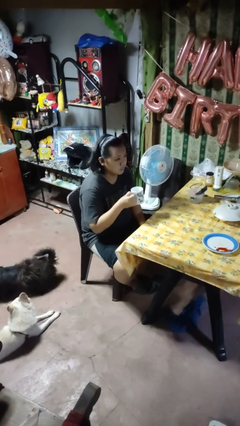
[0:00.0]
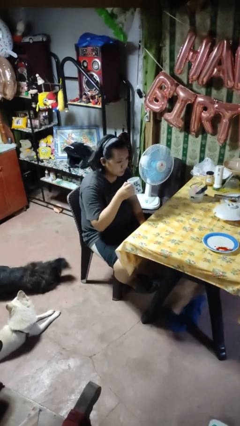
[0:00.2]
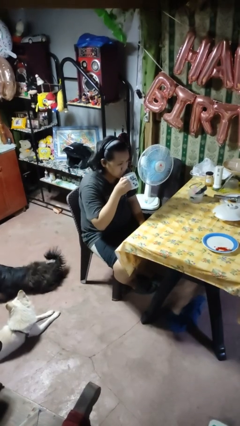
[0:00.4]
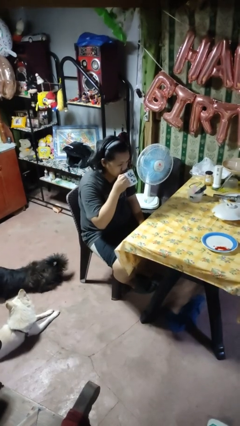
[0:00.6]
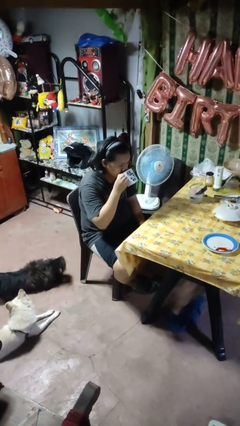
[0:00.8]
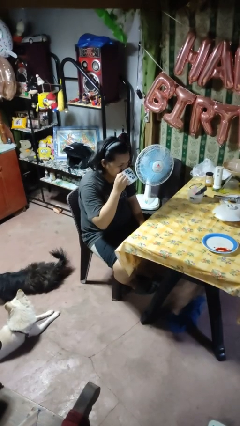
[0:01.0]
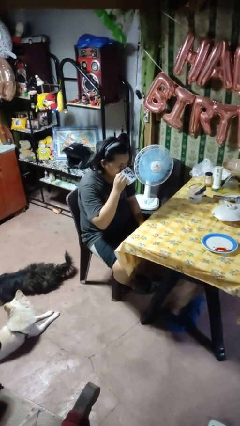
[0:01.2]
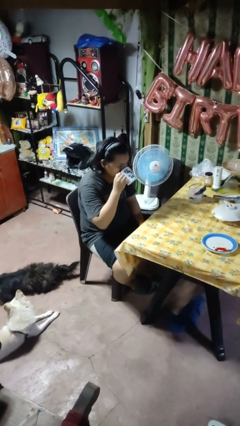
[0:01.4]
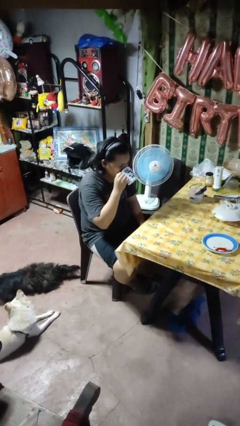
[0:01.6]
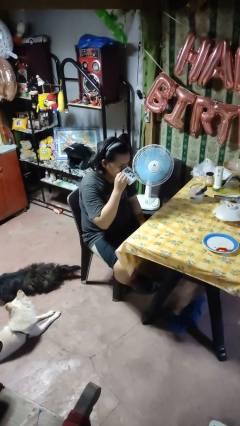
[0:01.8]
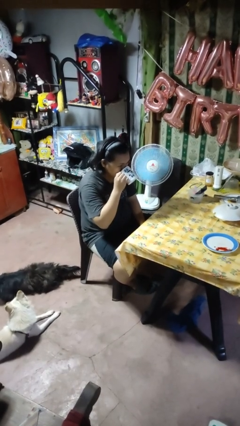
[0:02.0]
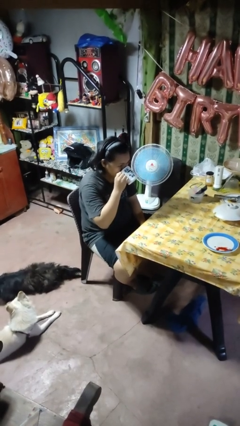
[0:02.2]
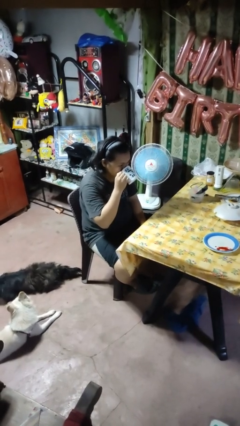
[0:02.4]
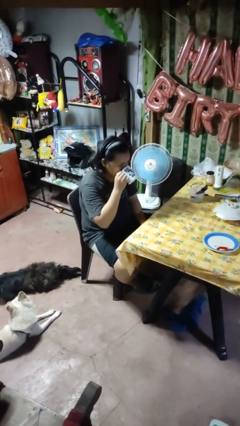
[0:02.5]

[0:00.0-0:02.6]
person drinks from mug

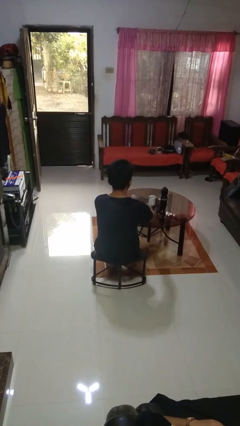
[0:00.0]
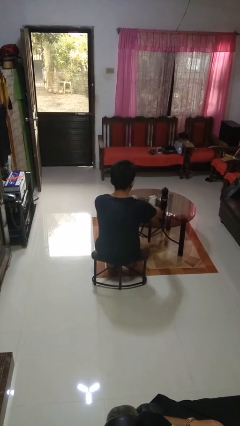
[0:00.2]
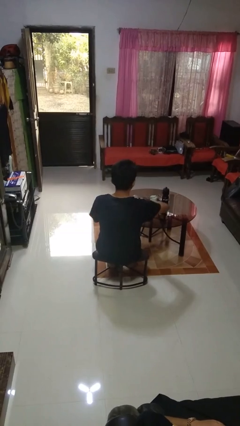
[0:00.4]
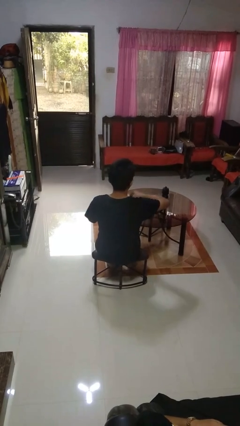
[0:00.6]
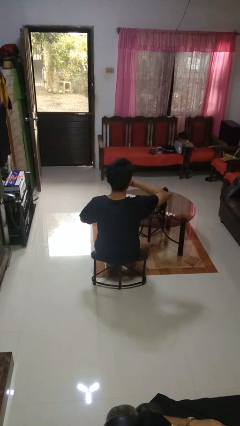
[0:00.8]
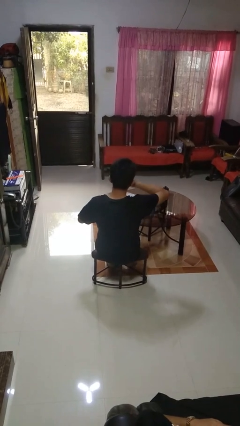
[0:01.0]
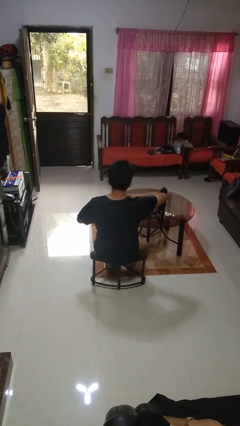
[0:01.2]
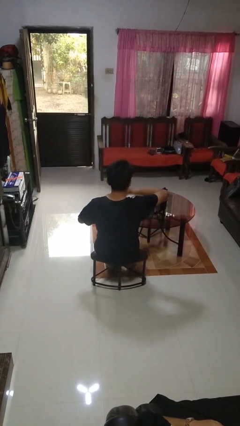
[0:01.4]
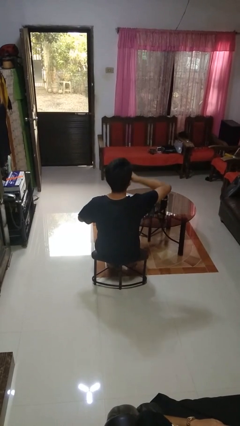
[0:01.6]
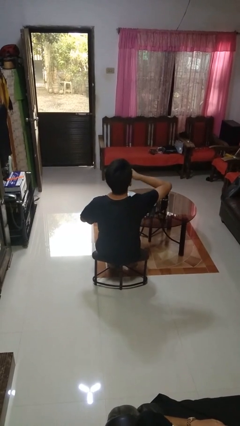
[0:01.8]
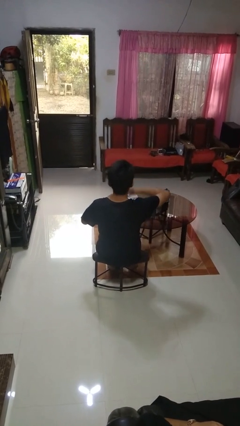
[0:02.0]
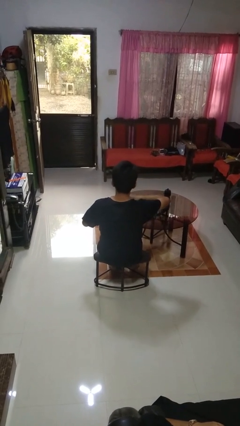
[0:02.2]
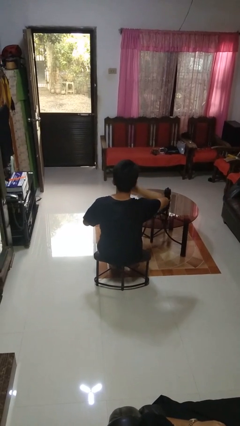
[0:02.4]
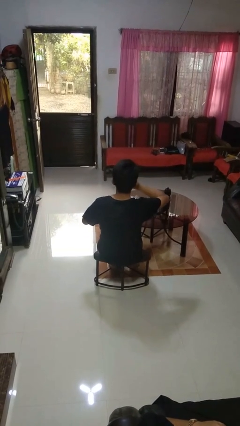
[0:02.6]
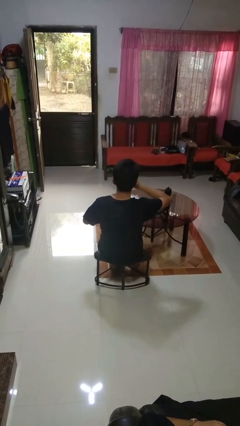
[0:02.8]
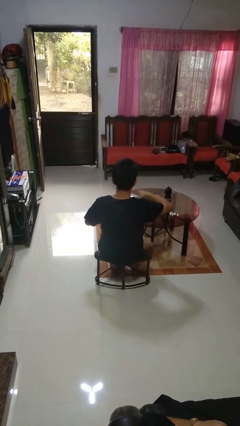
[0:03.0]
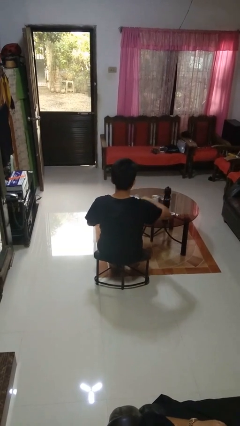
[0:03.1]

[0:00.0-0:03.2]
person eats with hands

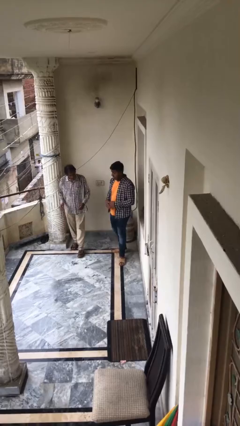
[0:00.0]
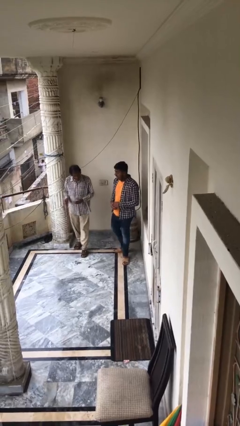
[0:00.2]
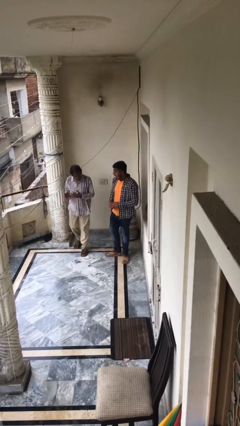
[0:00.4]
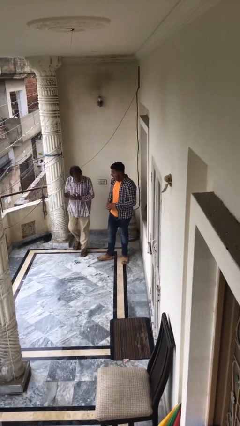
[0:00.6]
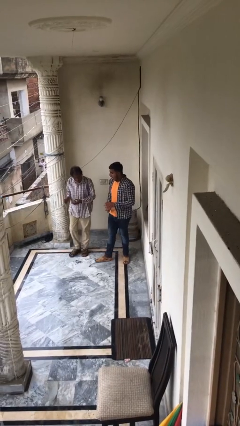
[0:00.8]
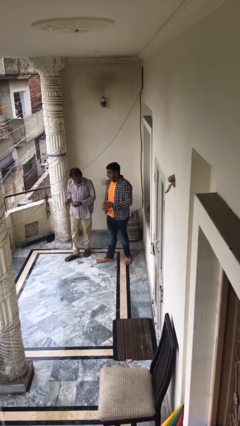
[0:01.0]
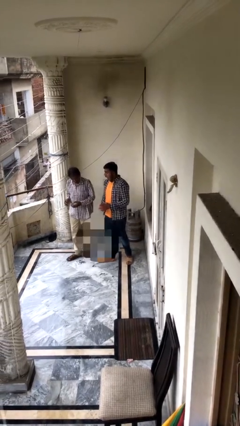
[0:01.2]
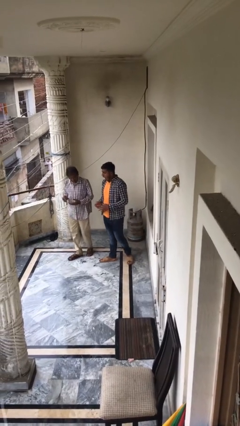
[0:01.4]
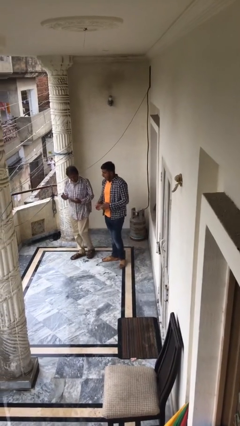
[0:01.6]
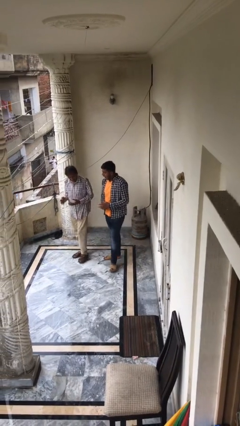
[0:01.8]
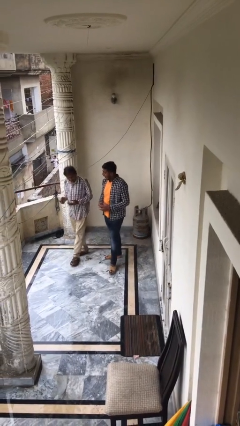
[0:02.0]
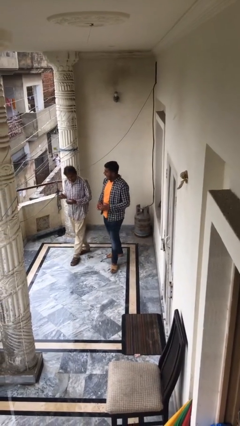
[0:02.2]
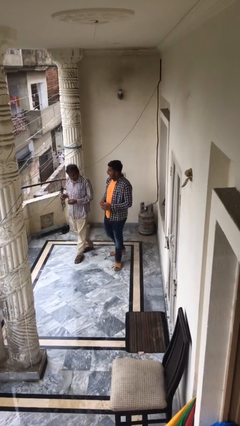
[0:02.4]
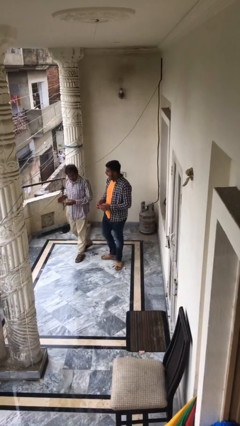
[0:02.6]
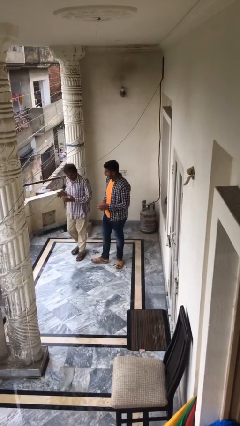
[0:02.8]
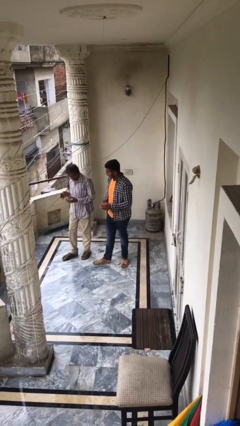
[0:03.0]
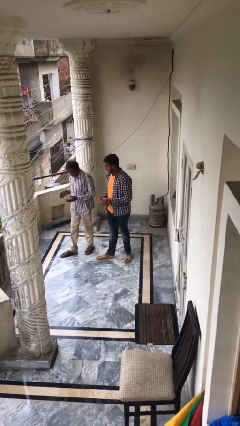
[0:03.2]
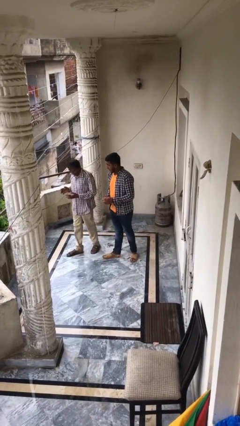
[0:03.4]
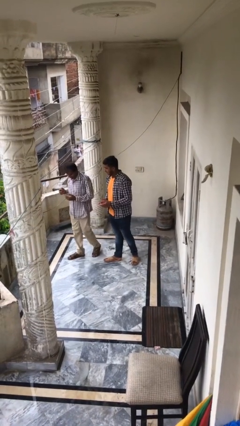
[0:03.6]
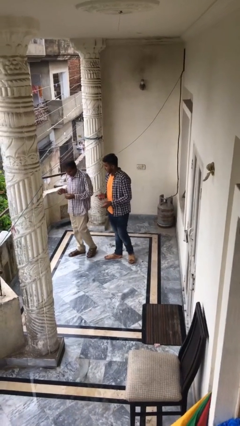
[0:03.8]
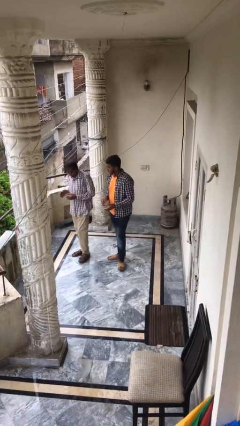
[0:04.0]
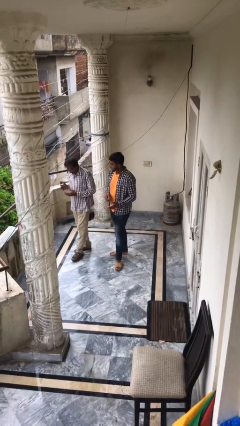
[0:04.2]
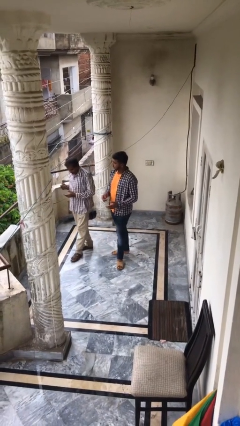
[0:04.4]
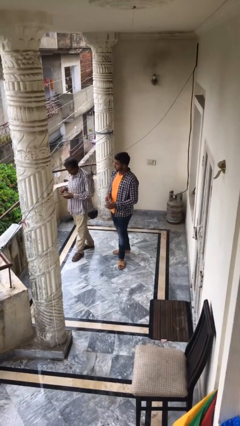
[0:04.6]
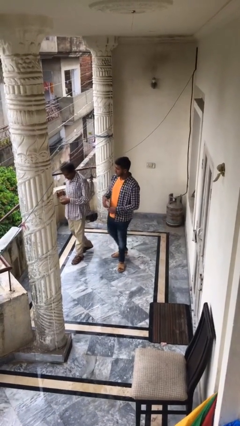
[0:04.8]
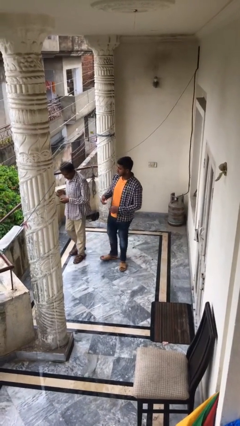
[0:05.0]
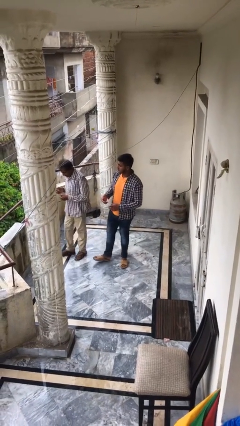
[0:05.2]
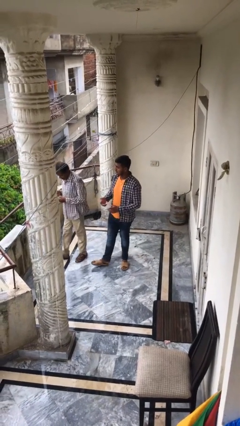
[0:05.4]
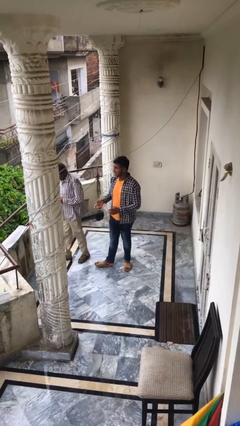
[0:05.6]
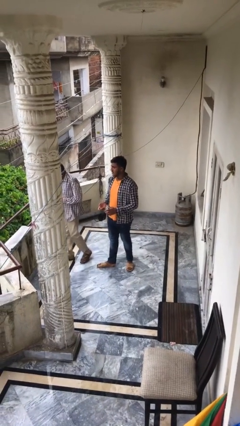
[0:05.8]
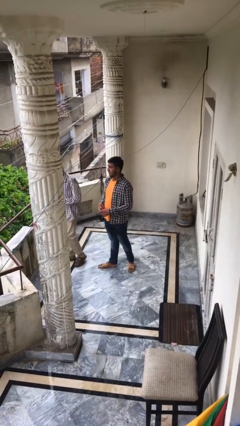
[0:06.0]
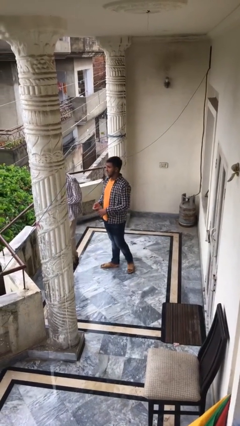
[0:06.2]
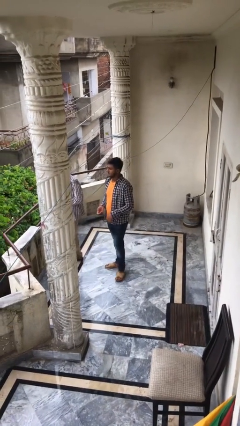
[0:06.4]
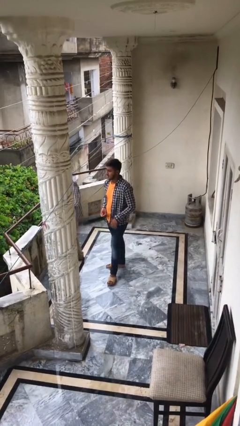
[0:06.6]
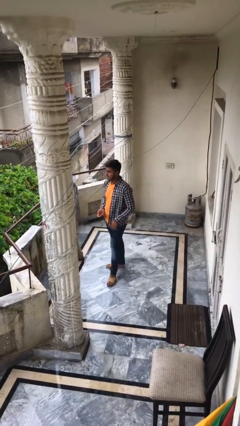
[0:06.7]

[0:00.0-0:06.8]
person talks to person

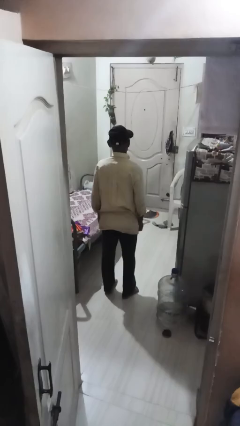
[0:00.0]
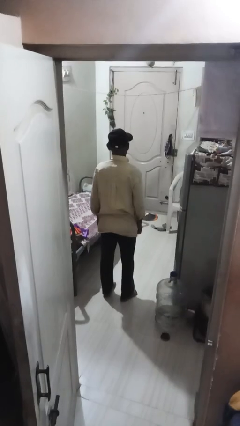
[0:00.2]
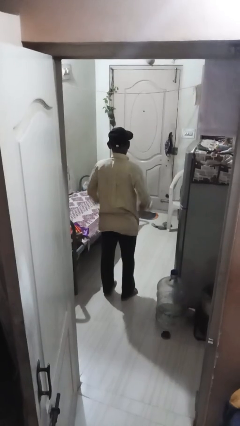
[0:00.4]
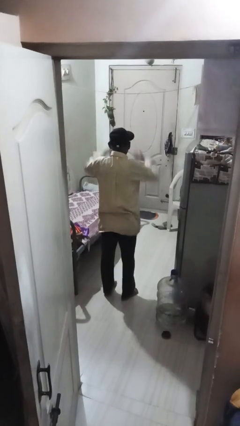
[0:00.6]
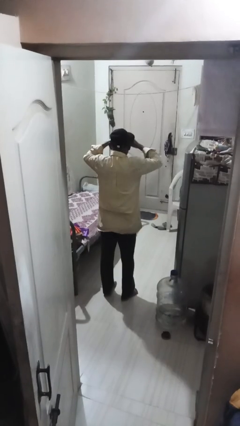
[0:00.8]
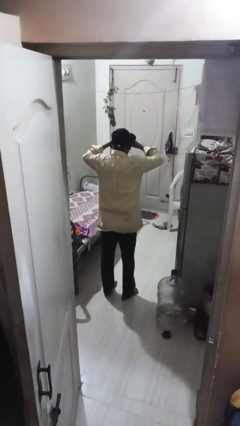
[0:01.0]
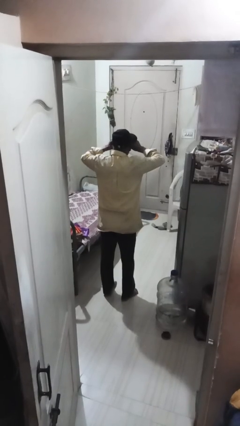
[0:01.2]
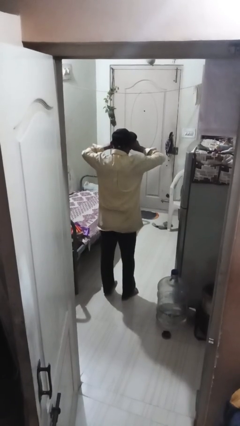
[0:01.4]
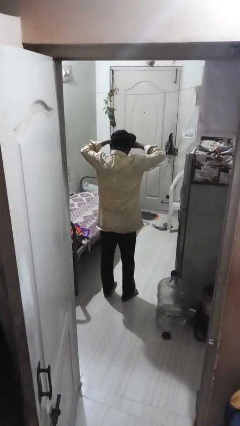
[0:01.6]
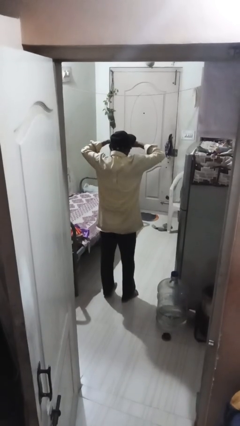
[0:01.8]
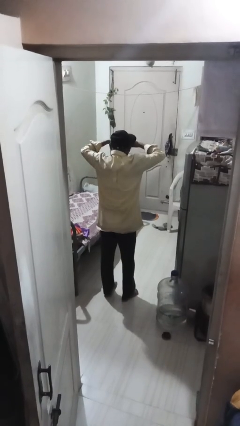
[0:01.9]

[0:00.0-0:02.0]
person rubs eyes

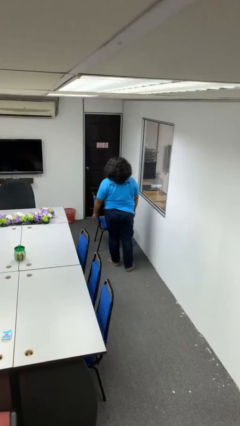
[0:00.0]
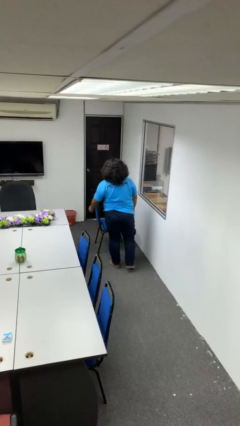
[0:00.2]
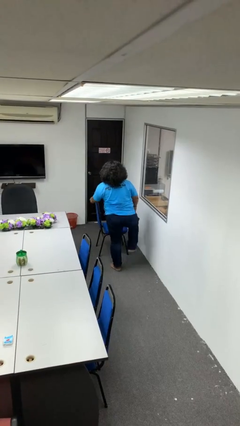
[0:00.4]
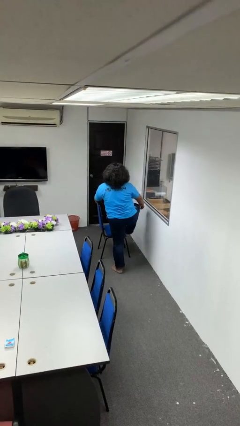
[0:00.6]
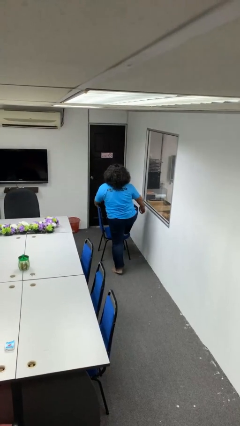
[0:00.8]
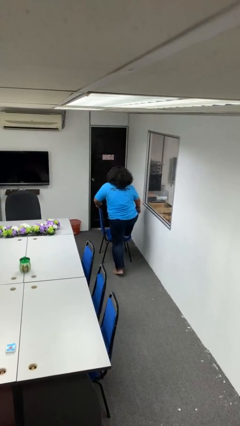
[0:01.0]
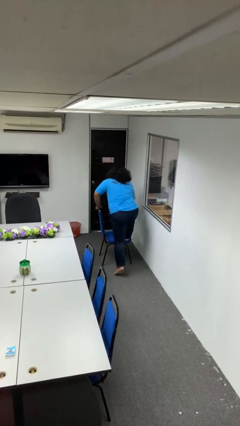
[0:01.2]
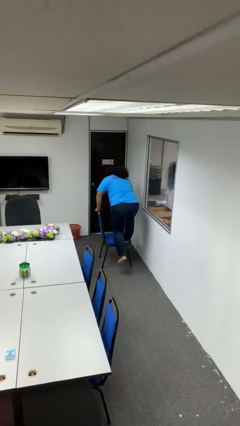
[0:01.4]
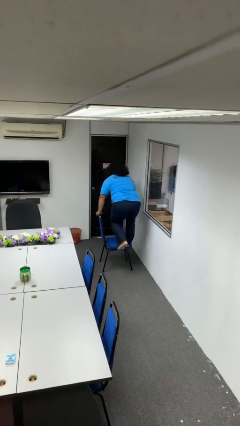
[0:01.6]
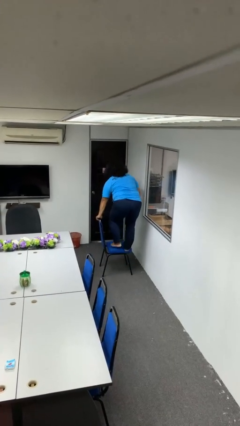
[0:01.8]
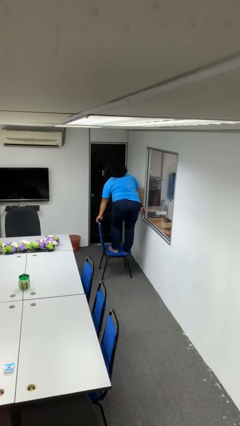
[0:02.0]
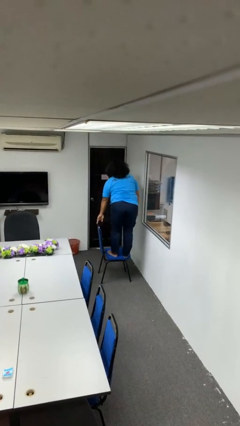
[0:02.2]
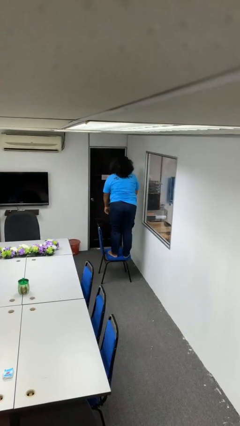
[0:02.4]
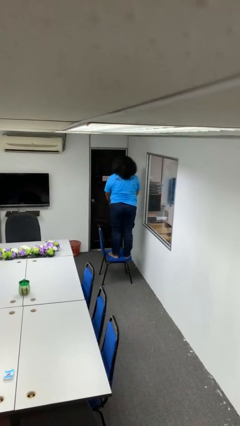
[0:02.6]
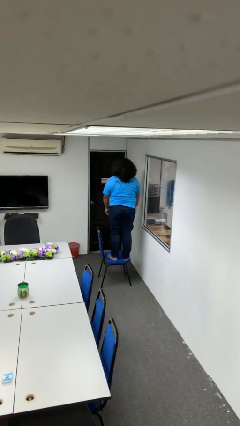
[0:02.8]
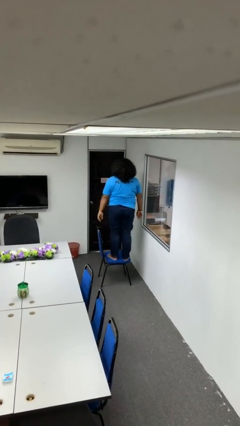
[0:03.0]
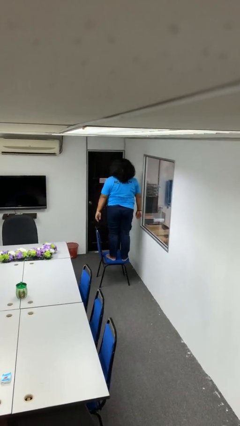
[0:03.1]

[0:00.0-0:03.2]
person climbs on chair

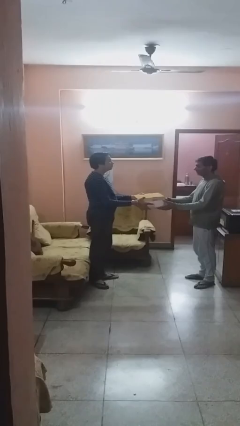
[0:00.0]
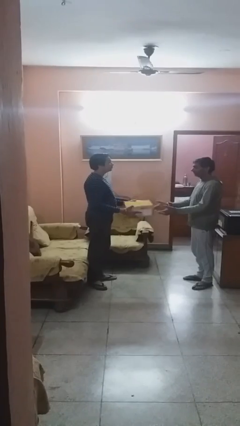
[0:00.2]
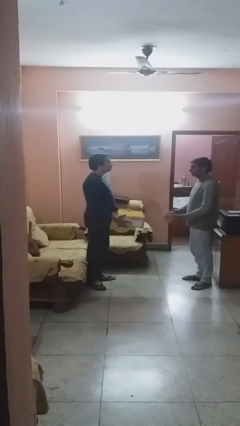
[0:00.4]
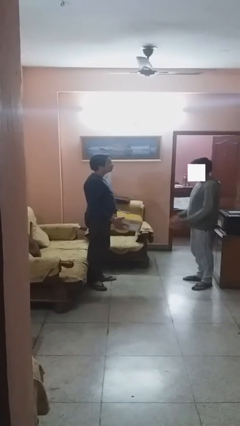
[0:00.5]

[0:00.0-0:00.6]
person transfers object to person
